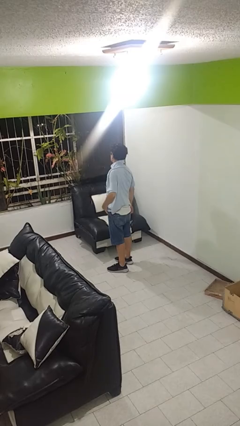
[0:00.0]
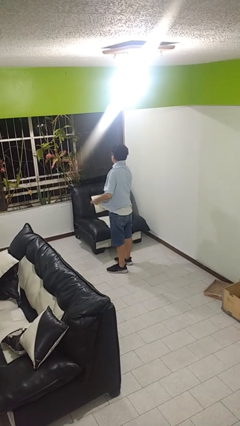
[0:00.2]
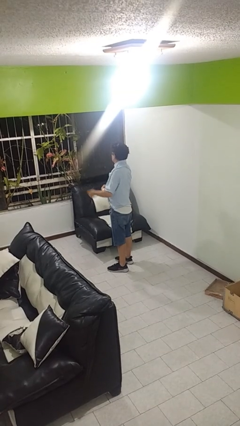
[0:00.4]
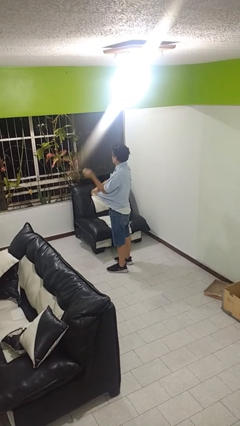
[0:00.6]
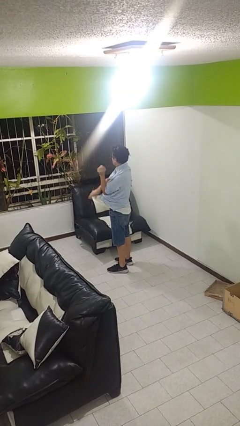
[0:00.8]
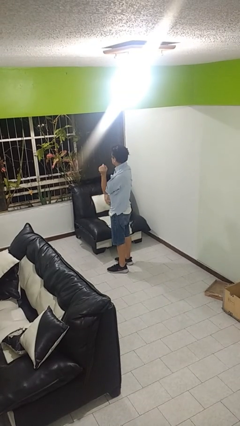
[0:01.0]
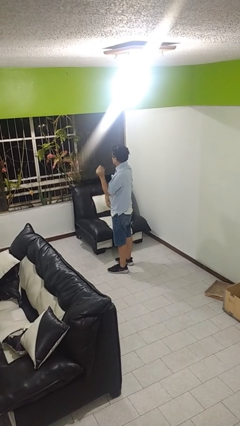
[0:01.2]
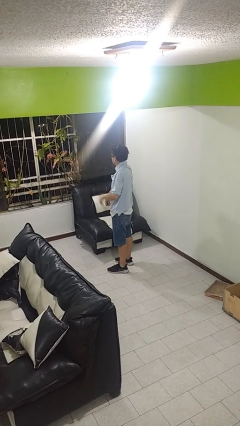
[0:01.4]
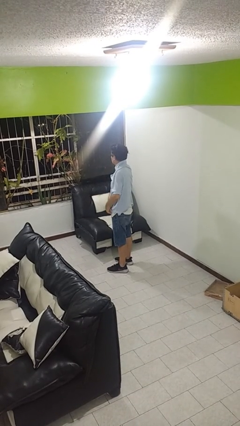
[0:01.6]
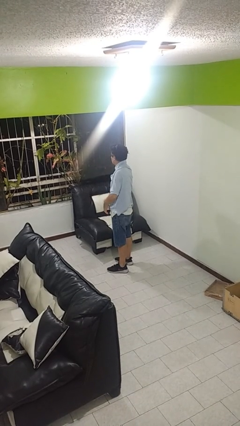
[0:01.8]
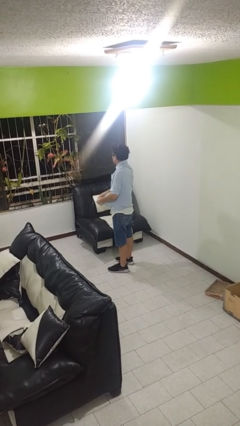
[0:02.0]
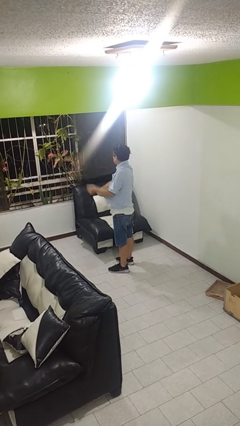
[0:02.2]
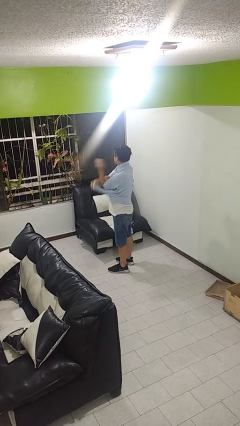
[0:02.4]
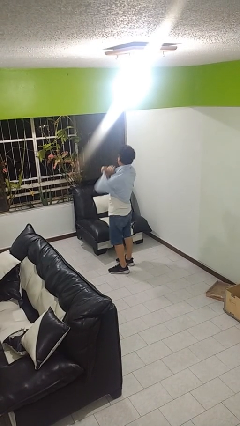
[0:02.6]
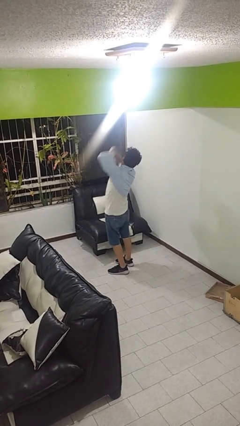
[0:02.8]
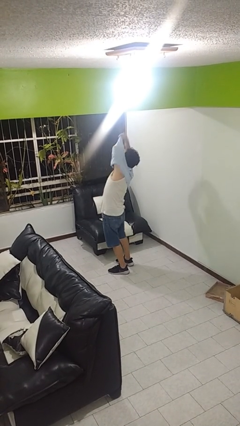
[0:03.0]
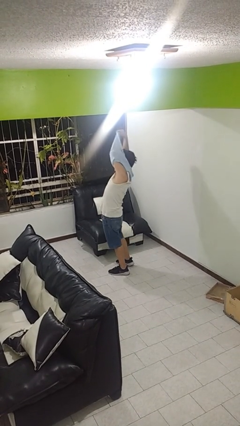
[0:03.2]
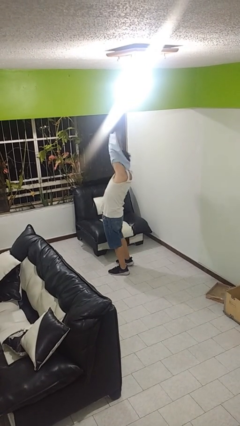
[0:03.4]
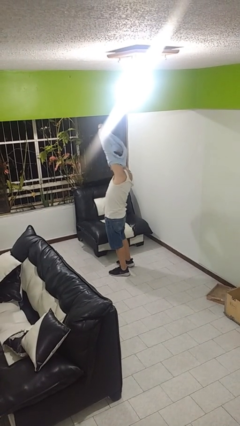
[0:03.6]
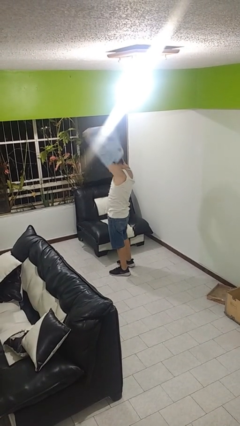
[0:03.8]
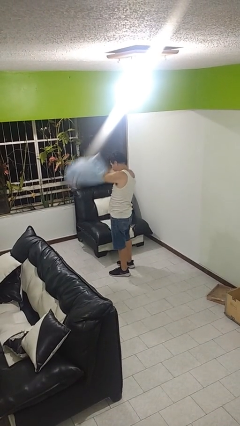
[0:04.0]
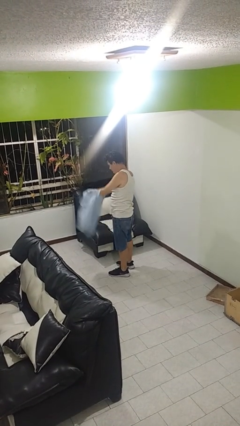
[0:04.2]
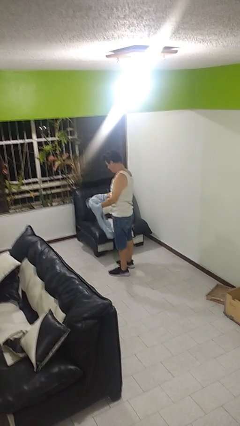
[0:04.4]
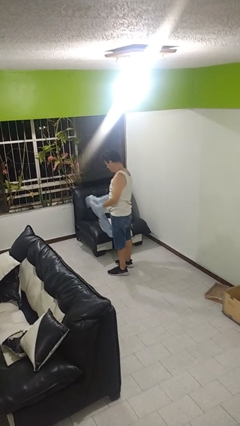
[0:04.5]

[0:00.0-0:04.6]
person takes off shirt

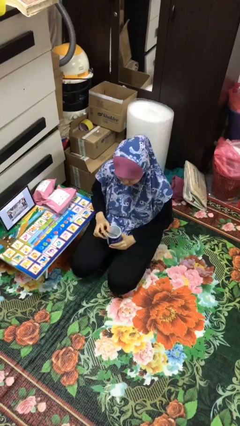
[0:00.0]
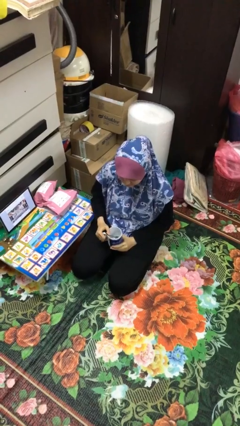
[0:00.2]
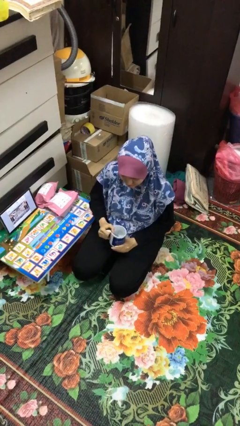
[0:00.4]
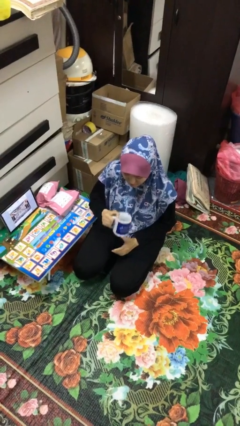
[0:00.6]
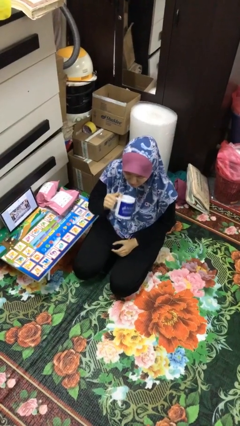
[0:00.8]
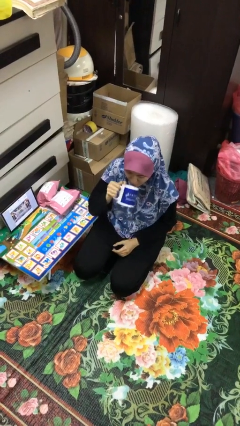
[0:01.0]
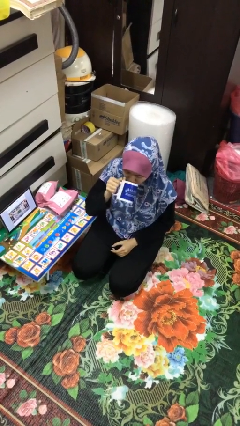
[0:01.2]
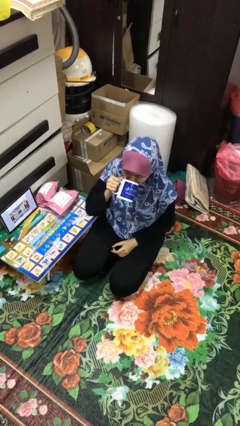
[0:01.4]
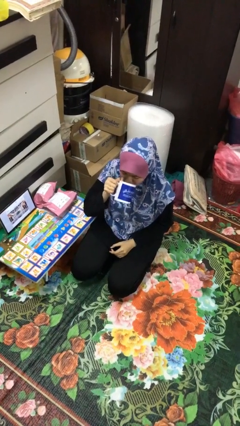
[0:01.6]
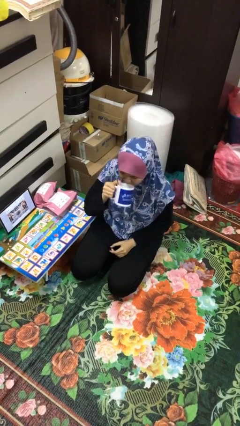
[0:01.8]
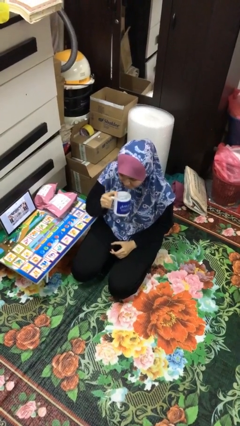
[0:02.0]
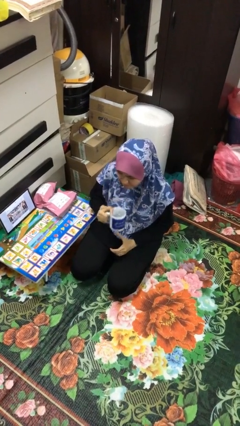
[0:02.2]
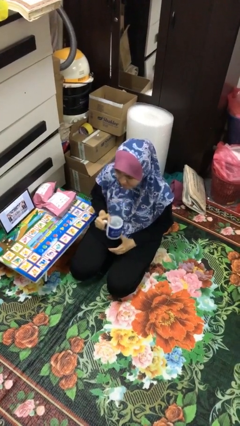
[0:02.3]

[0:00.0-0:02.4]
person drinks from mug

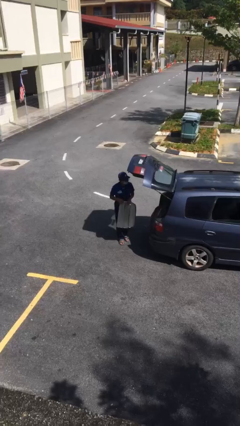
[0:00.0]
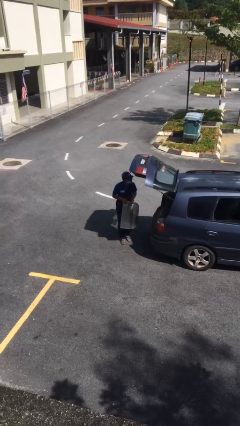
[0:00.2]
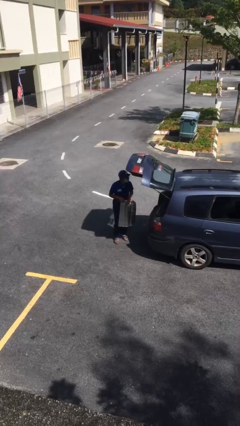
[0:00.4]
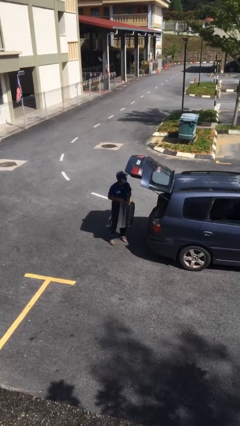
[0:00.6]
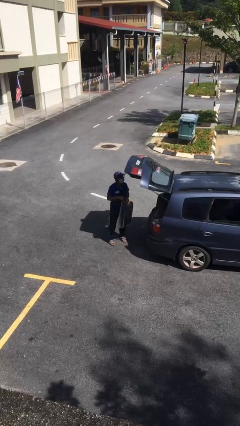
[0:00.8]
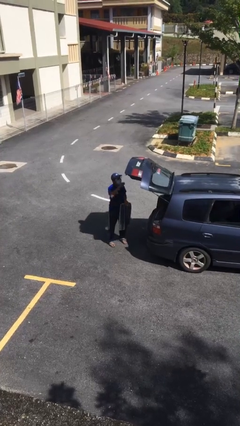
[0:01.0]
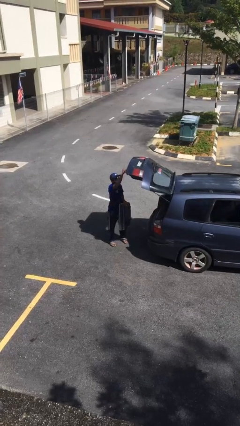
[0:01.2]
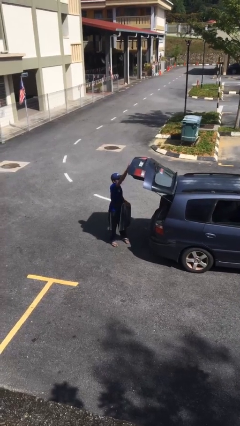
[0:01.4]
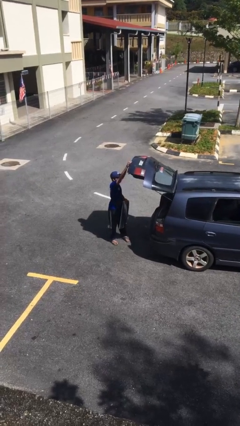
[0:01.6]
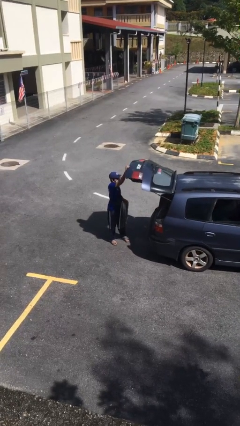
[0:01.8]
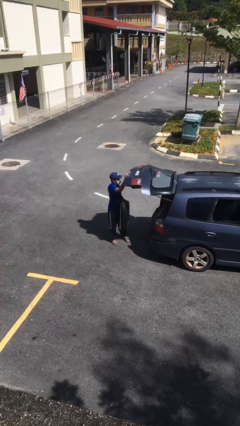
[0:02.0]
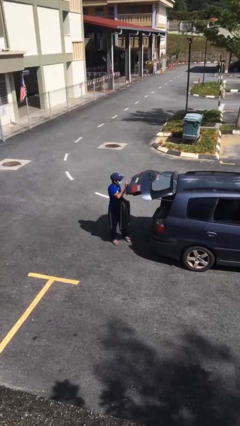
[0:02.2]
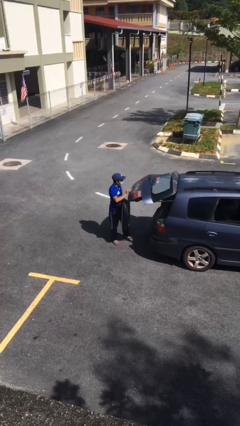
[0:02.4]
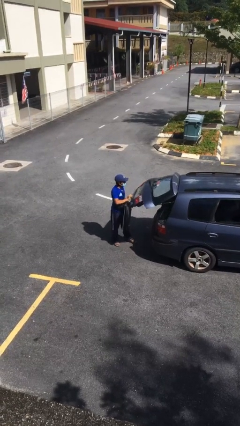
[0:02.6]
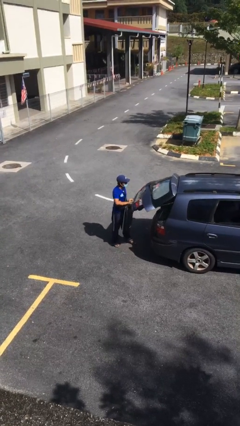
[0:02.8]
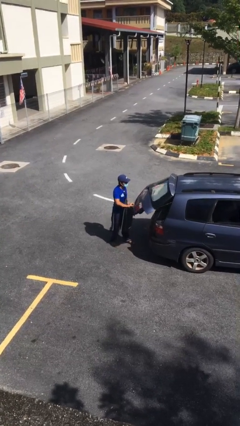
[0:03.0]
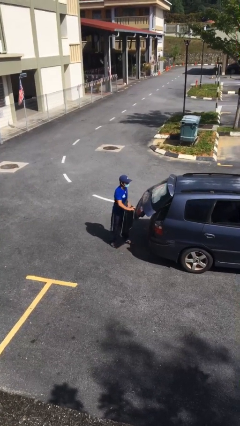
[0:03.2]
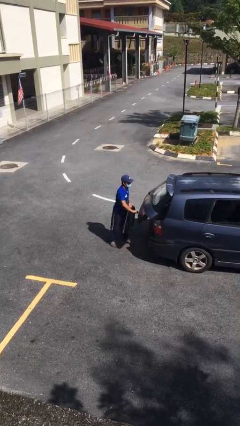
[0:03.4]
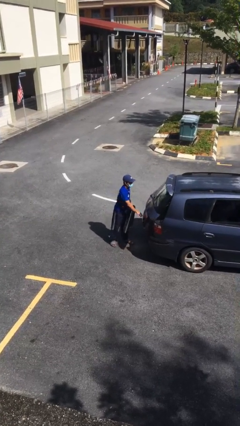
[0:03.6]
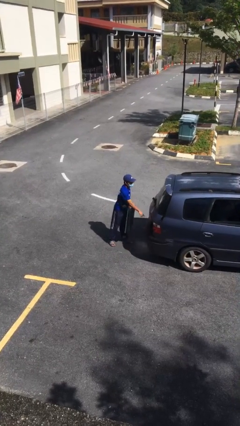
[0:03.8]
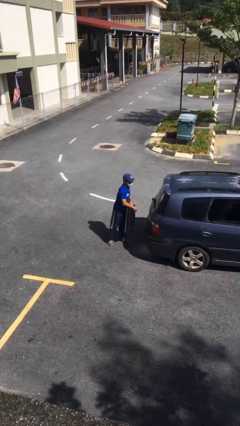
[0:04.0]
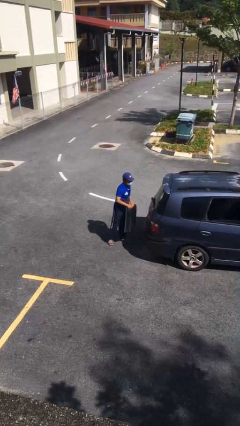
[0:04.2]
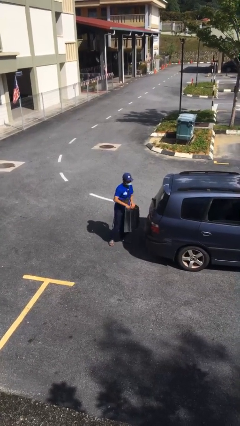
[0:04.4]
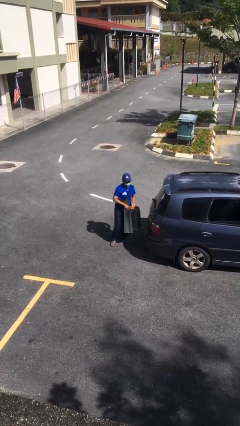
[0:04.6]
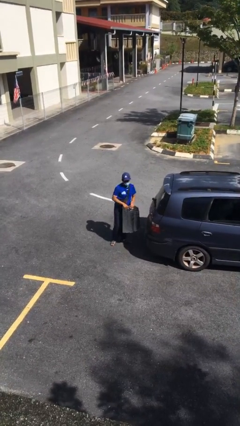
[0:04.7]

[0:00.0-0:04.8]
person closes car trunk

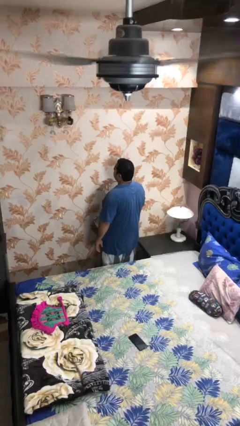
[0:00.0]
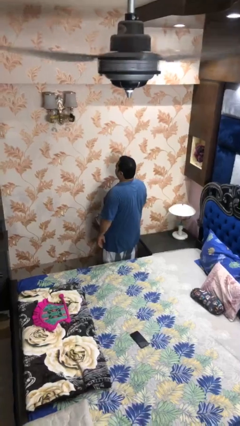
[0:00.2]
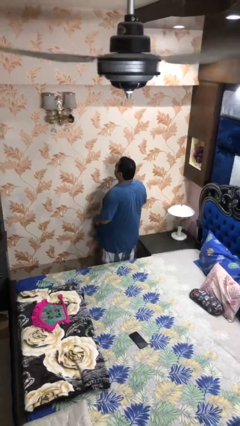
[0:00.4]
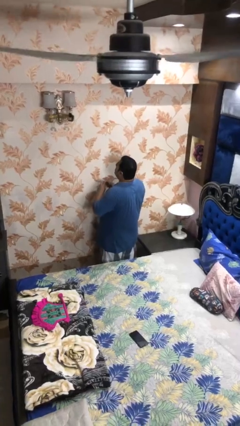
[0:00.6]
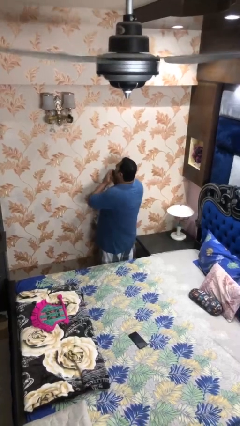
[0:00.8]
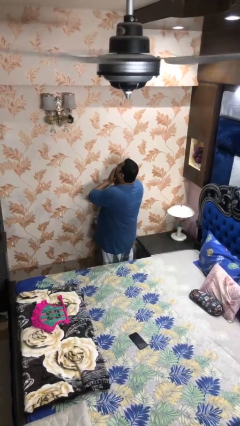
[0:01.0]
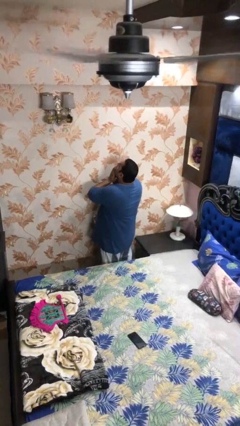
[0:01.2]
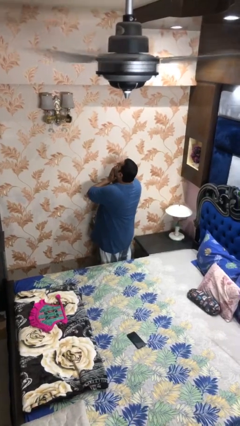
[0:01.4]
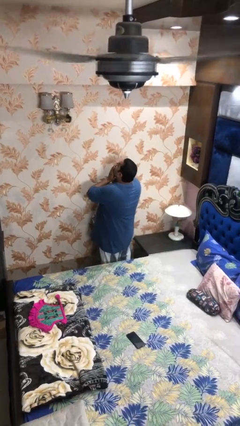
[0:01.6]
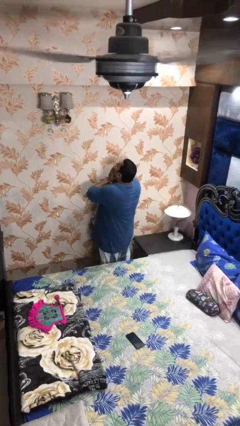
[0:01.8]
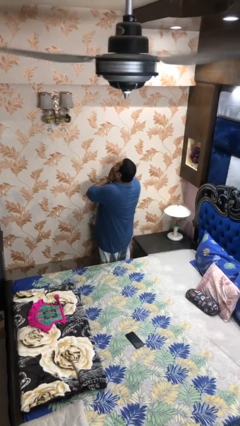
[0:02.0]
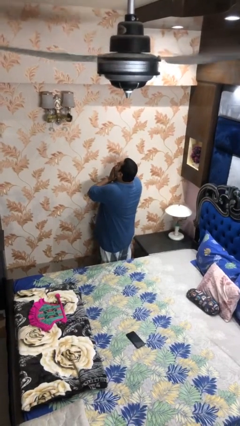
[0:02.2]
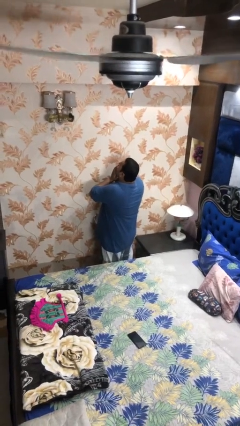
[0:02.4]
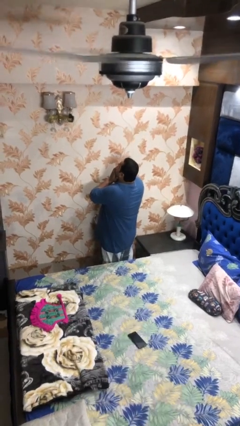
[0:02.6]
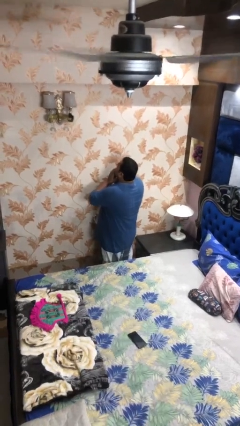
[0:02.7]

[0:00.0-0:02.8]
person yawns

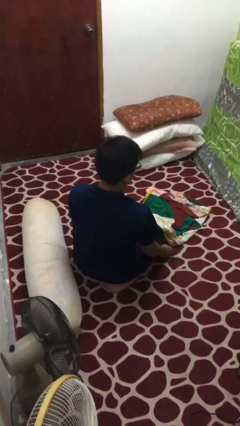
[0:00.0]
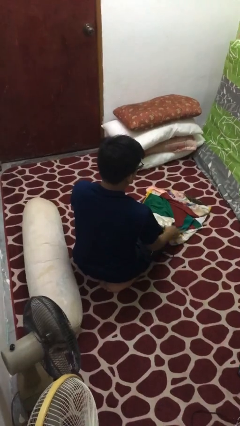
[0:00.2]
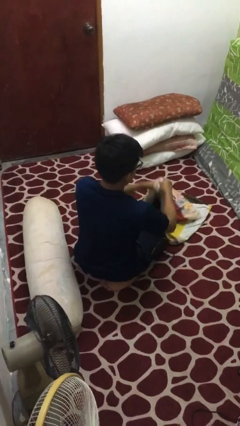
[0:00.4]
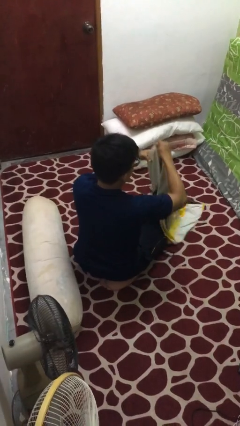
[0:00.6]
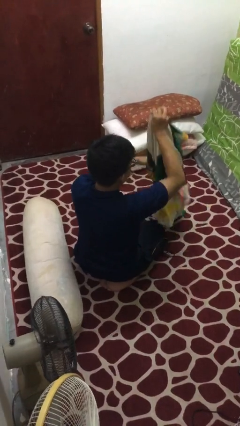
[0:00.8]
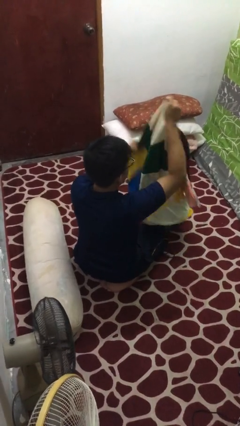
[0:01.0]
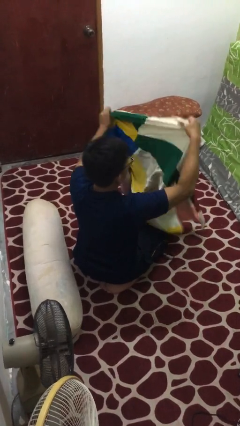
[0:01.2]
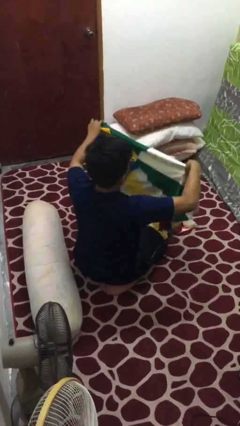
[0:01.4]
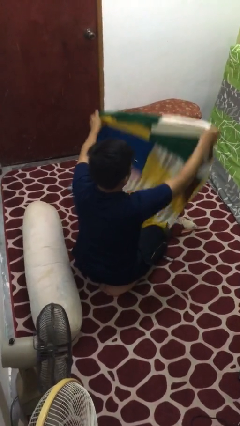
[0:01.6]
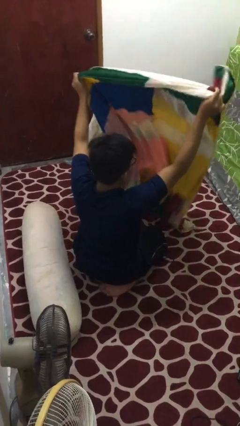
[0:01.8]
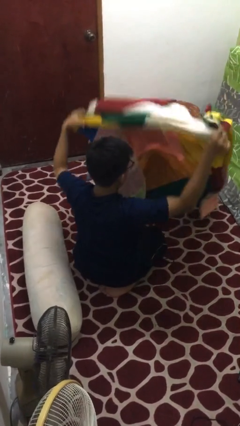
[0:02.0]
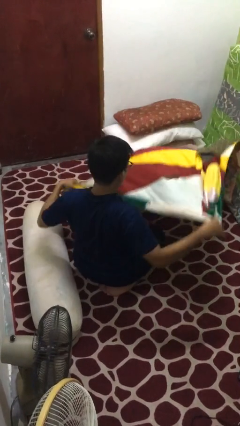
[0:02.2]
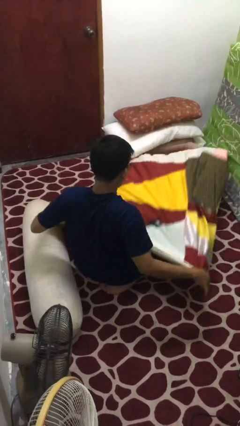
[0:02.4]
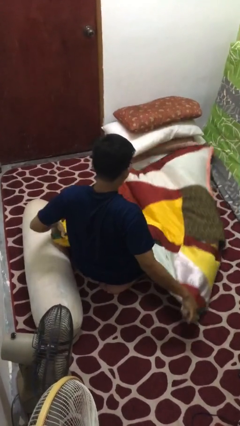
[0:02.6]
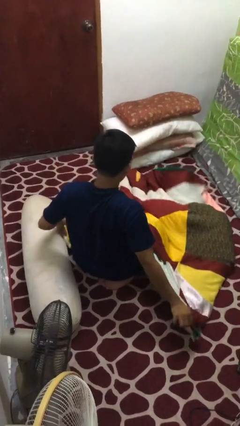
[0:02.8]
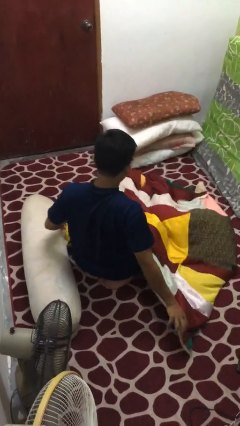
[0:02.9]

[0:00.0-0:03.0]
person unfolds blanket

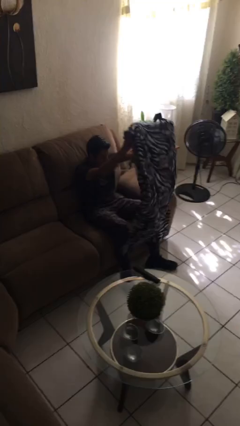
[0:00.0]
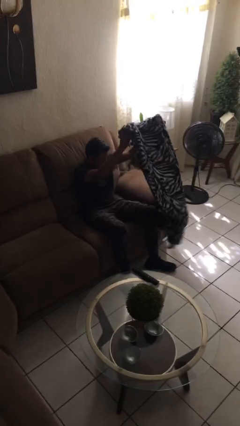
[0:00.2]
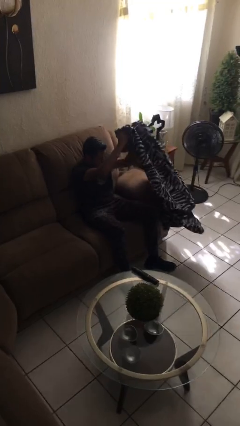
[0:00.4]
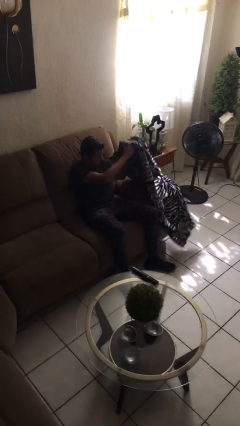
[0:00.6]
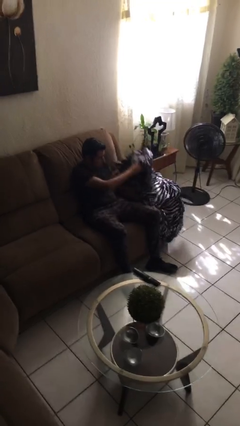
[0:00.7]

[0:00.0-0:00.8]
person uncovers with blanket
